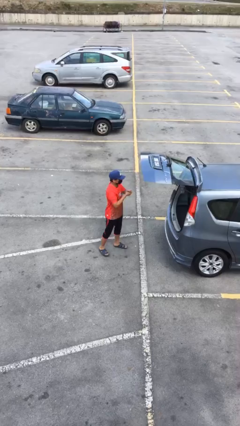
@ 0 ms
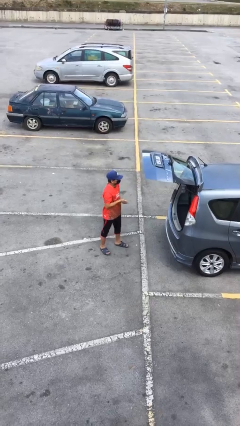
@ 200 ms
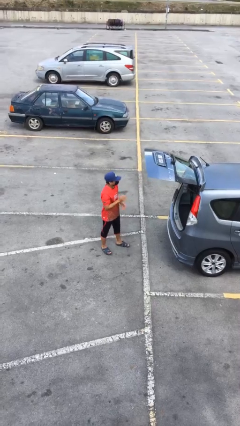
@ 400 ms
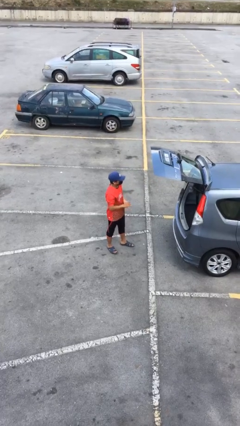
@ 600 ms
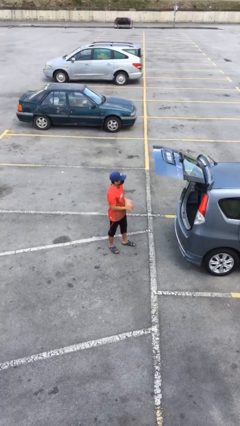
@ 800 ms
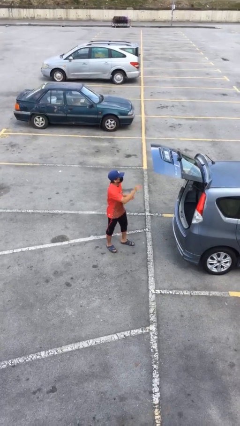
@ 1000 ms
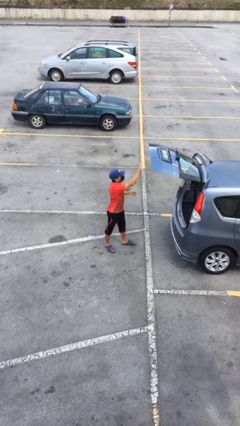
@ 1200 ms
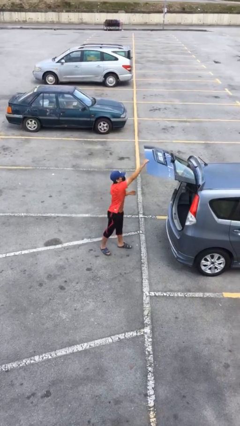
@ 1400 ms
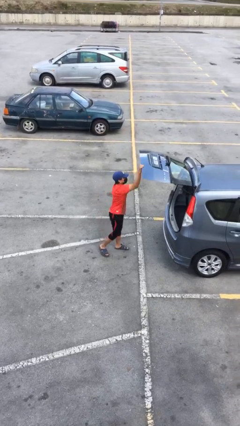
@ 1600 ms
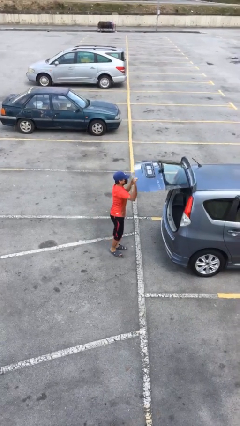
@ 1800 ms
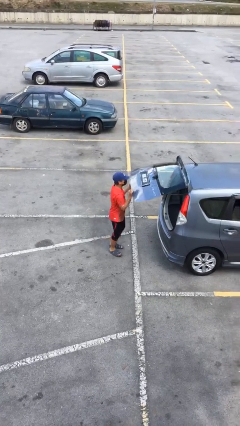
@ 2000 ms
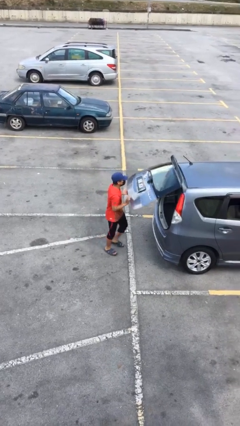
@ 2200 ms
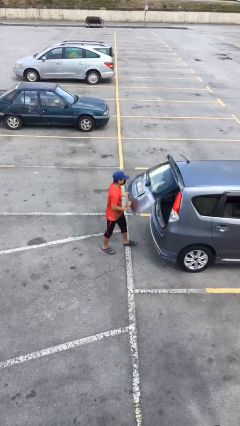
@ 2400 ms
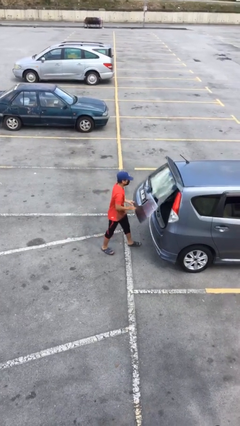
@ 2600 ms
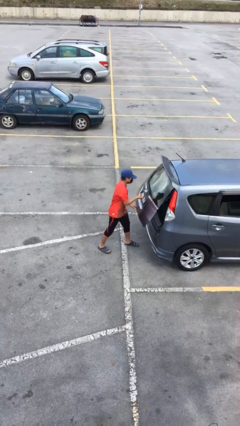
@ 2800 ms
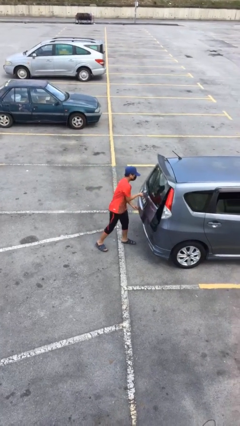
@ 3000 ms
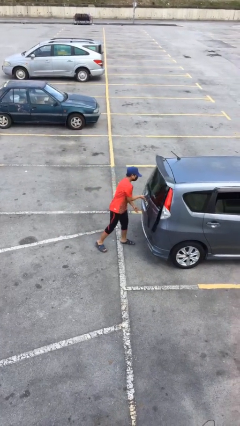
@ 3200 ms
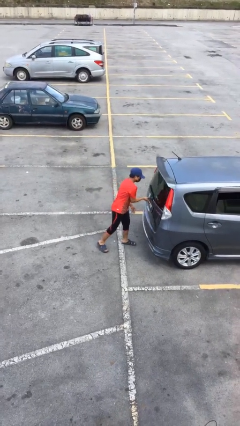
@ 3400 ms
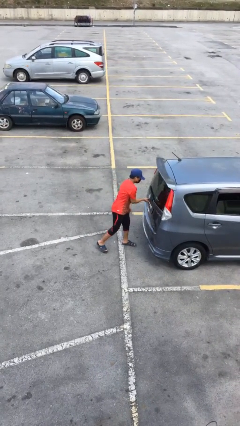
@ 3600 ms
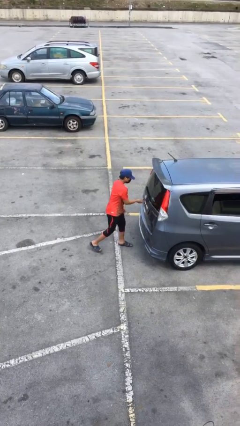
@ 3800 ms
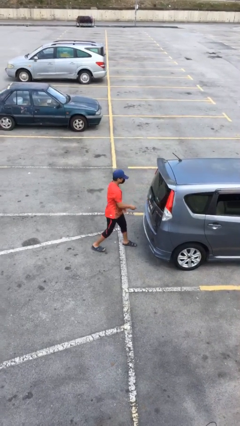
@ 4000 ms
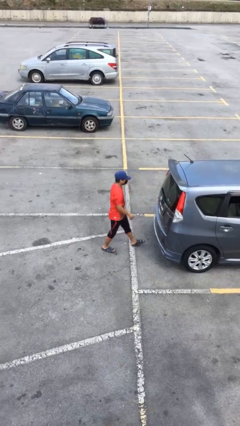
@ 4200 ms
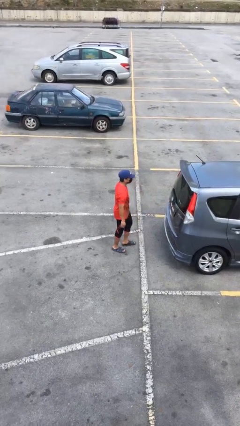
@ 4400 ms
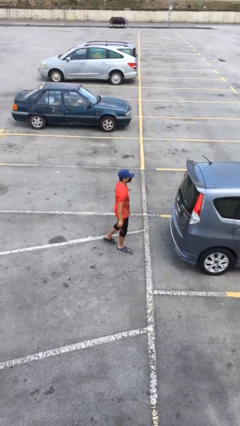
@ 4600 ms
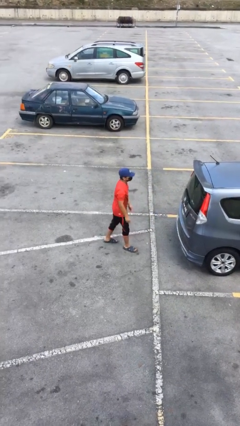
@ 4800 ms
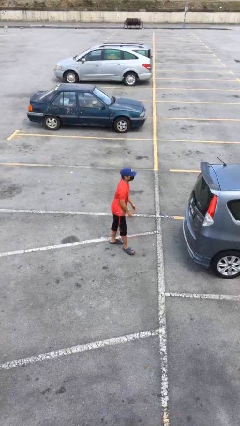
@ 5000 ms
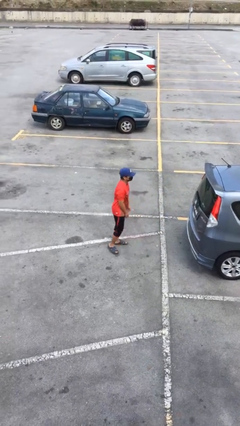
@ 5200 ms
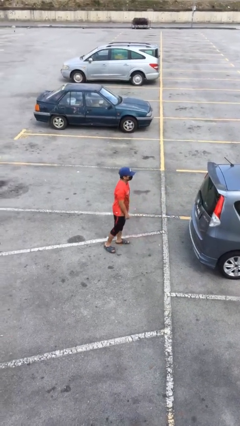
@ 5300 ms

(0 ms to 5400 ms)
person closes car trunk

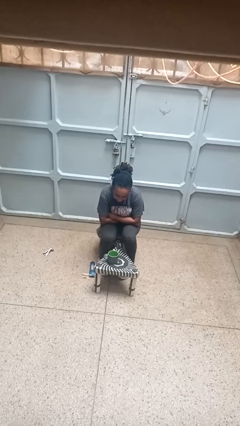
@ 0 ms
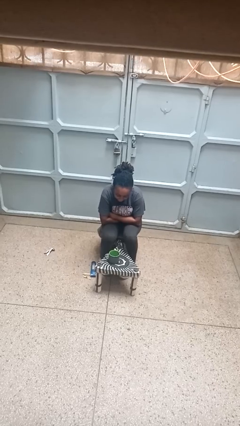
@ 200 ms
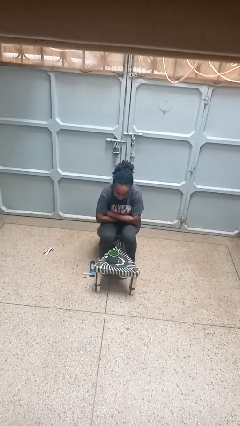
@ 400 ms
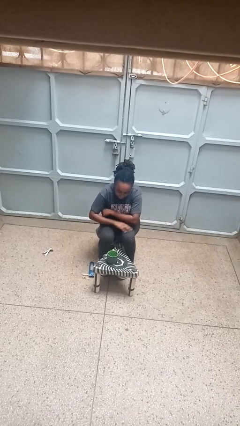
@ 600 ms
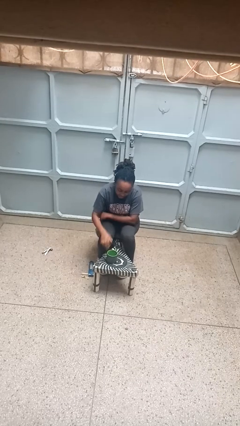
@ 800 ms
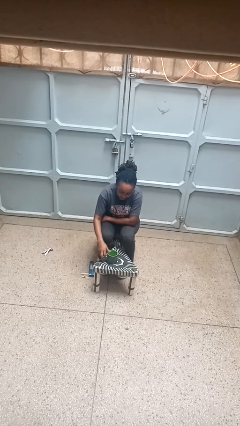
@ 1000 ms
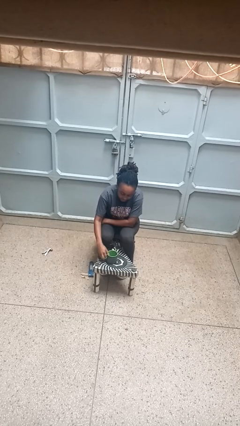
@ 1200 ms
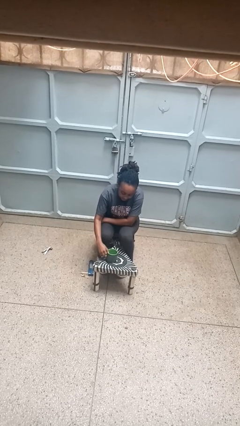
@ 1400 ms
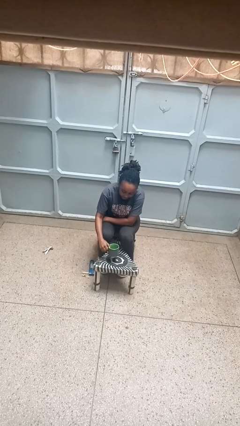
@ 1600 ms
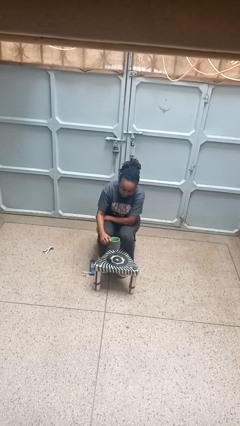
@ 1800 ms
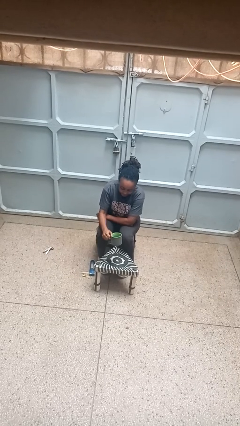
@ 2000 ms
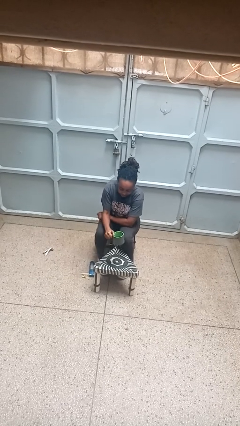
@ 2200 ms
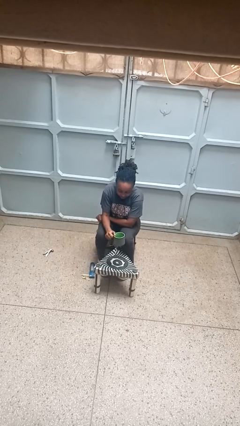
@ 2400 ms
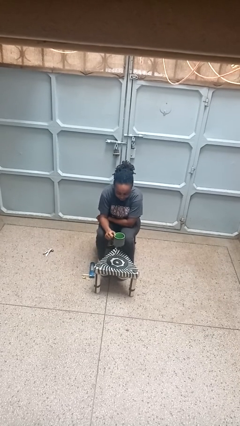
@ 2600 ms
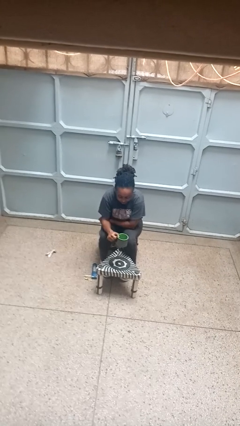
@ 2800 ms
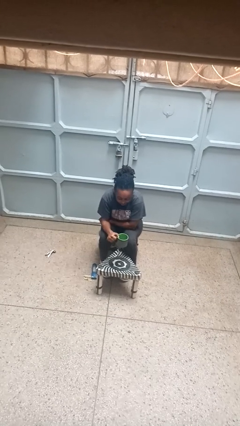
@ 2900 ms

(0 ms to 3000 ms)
person picks up object from table

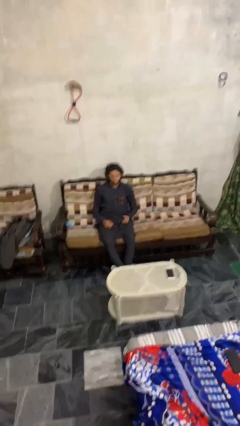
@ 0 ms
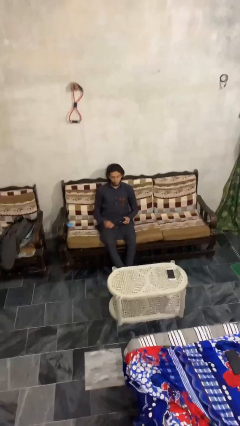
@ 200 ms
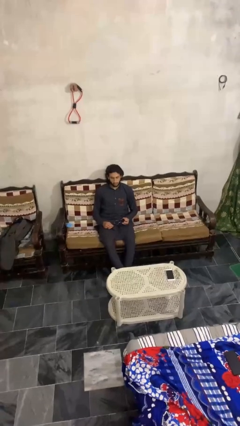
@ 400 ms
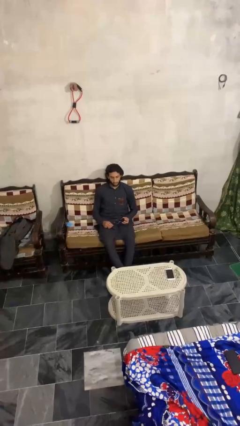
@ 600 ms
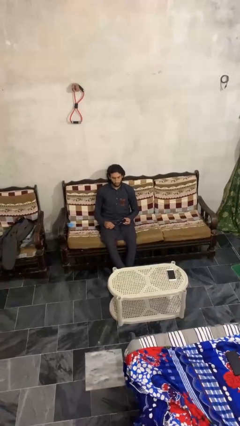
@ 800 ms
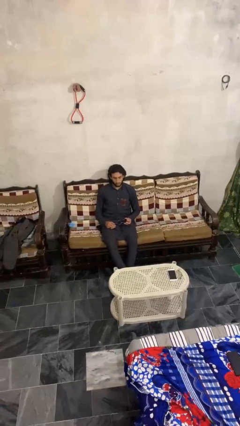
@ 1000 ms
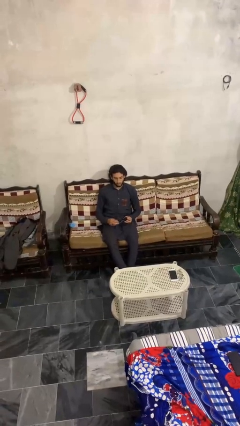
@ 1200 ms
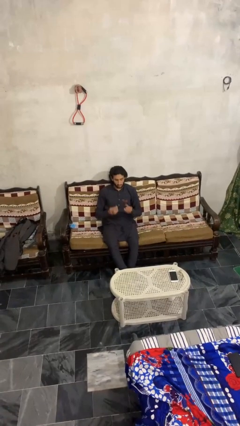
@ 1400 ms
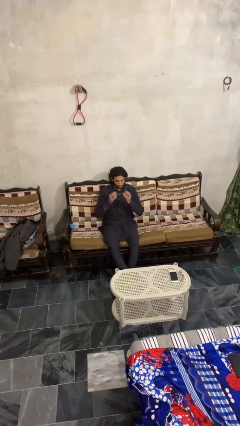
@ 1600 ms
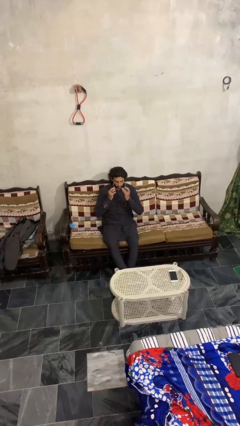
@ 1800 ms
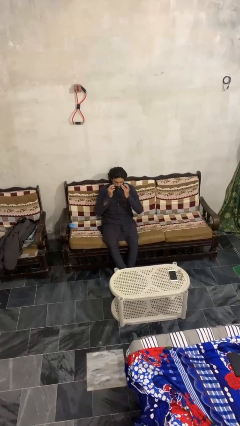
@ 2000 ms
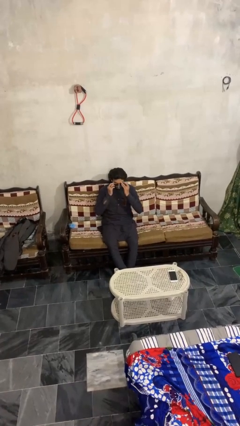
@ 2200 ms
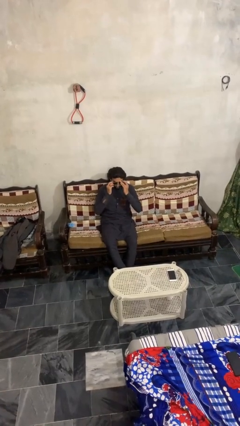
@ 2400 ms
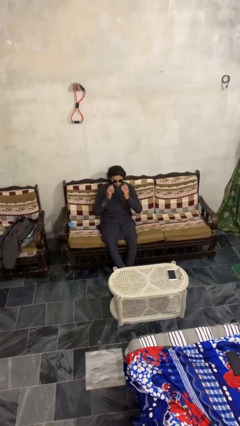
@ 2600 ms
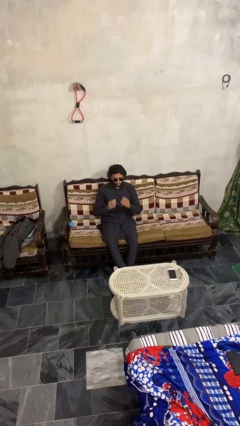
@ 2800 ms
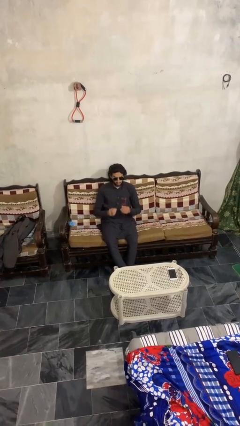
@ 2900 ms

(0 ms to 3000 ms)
person puts on sunglasses

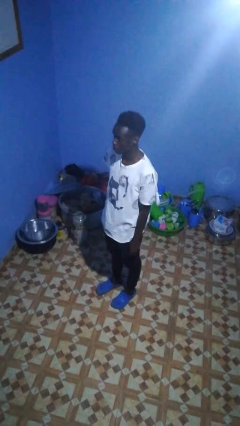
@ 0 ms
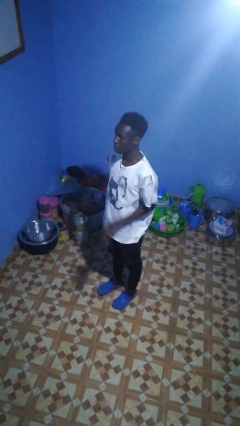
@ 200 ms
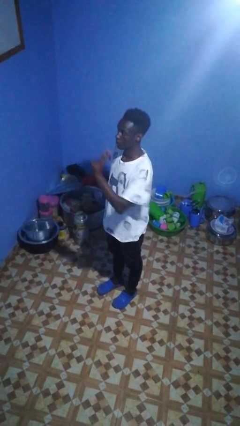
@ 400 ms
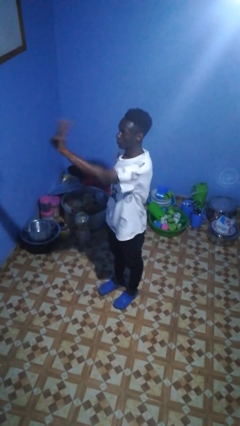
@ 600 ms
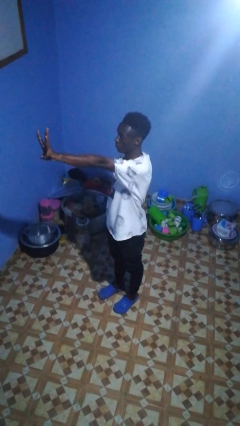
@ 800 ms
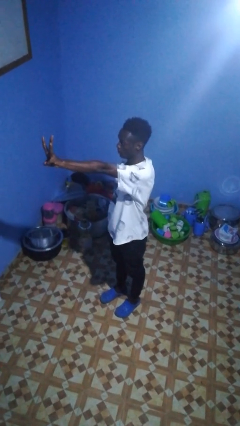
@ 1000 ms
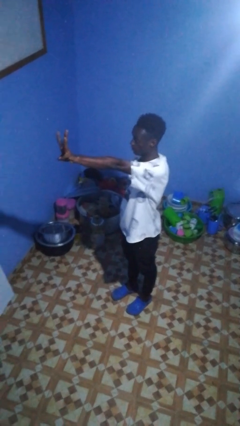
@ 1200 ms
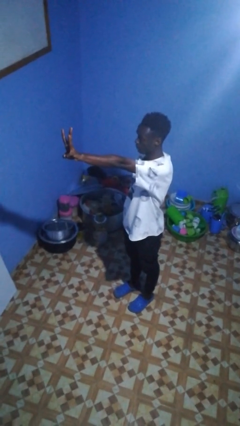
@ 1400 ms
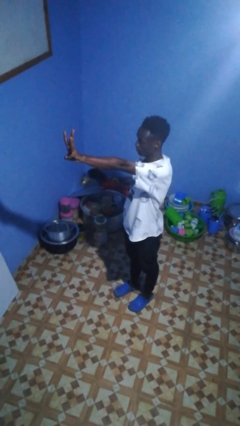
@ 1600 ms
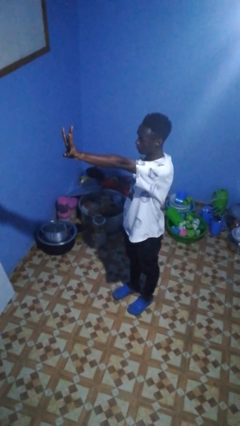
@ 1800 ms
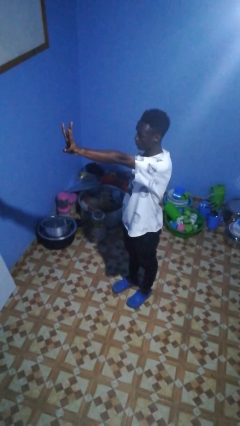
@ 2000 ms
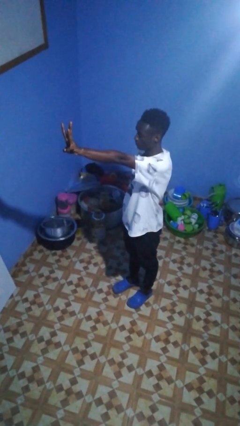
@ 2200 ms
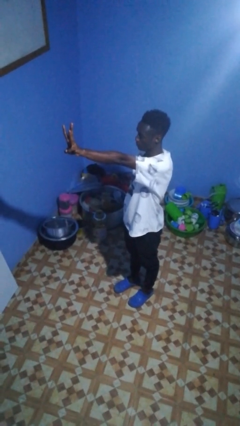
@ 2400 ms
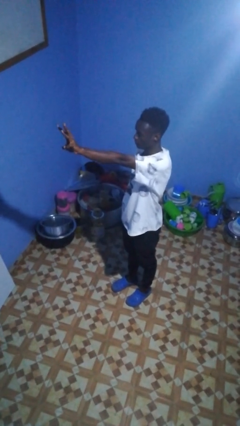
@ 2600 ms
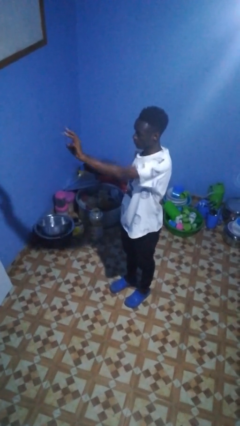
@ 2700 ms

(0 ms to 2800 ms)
person gestures number three

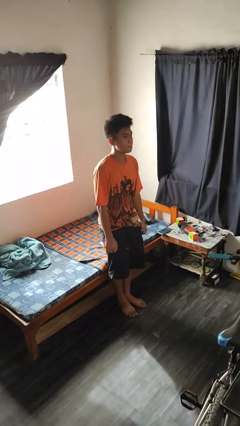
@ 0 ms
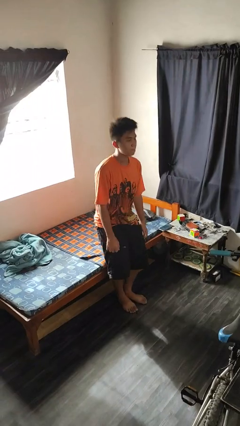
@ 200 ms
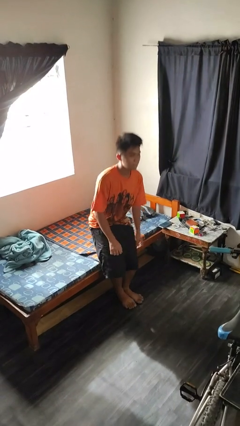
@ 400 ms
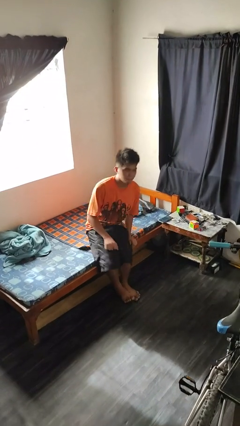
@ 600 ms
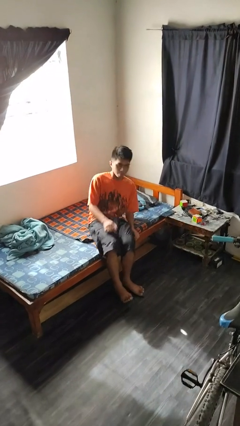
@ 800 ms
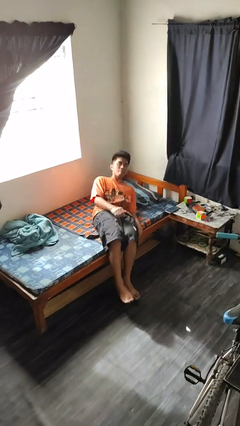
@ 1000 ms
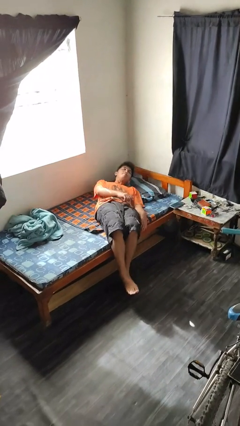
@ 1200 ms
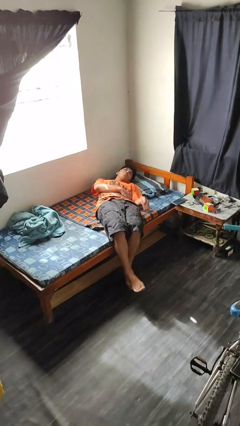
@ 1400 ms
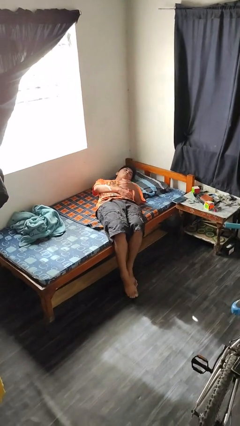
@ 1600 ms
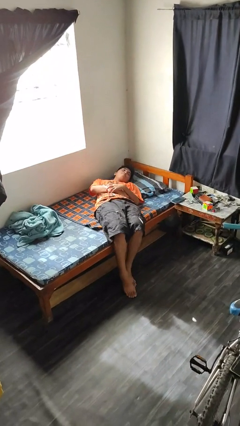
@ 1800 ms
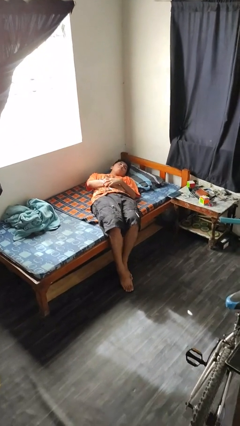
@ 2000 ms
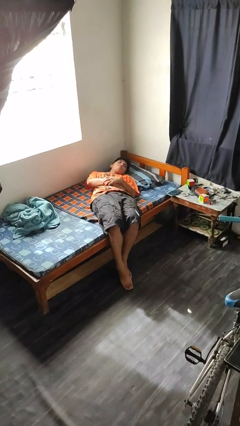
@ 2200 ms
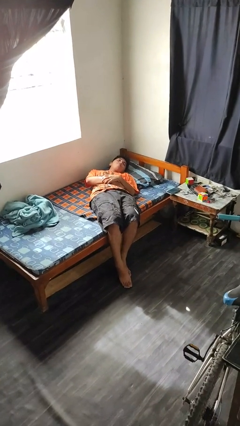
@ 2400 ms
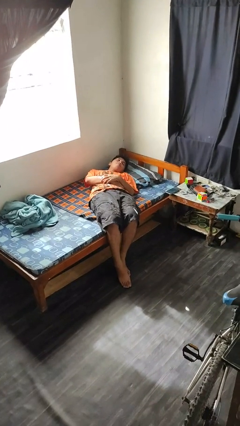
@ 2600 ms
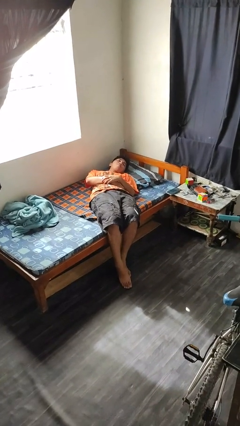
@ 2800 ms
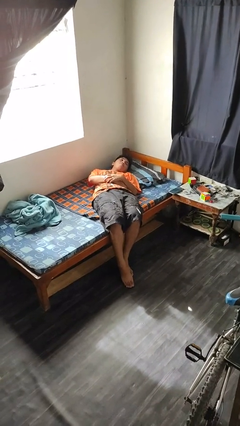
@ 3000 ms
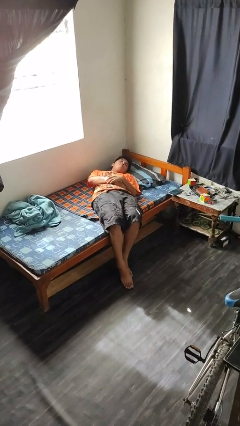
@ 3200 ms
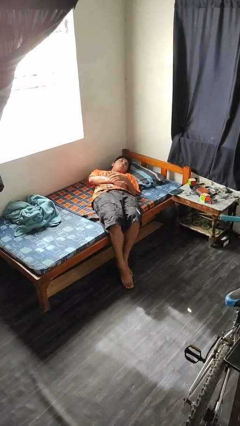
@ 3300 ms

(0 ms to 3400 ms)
person lies down on bed
